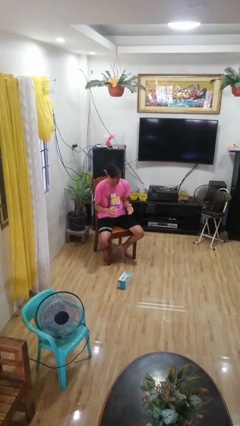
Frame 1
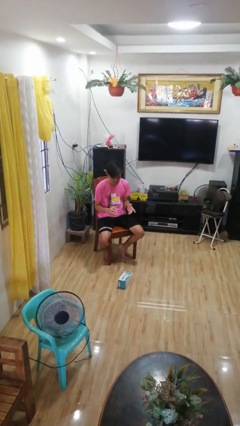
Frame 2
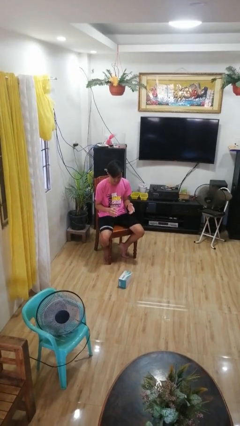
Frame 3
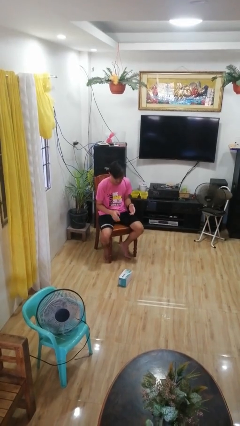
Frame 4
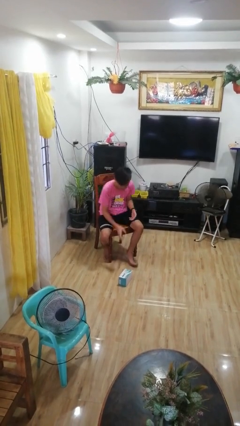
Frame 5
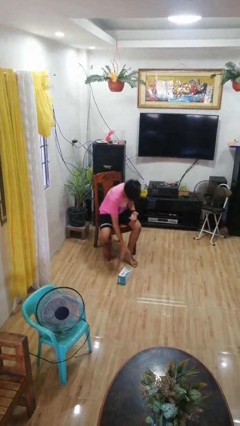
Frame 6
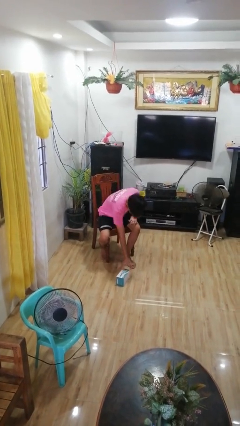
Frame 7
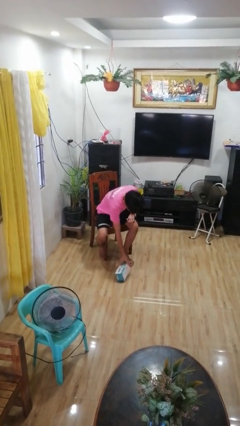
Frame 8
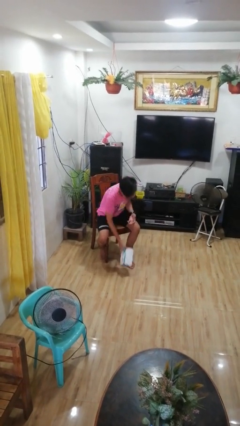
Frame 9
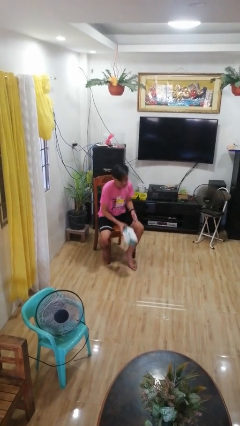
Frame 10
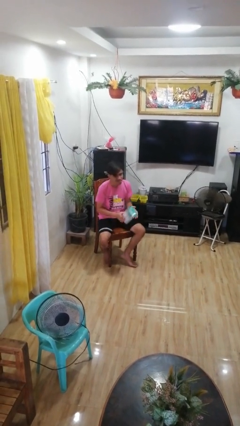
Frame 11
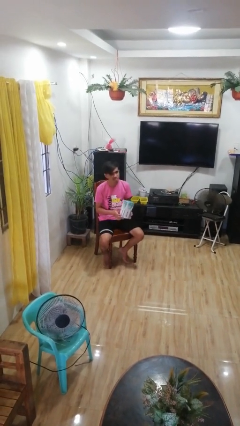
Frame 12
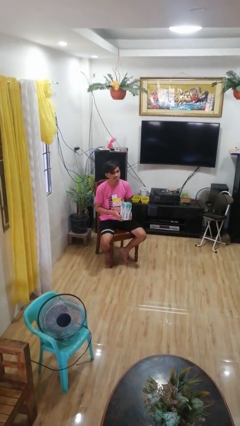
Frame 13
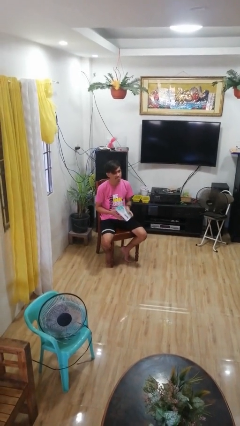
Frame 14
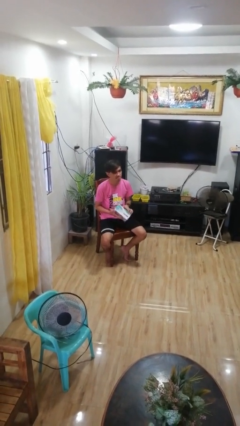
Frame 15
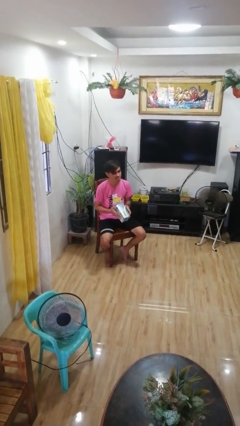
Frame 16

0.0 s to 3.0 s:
person picks up object from floor

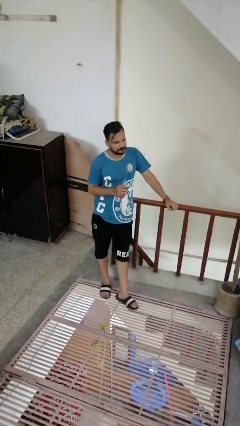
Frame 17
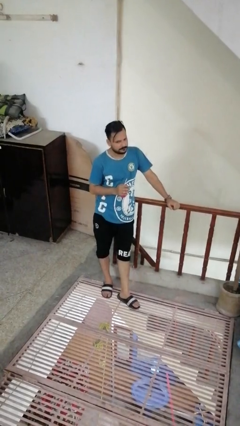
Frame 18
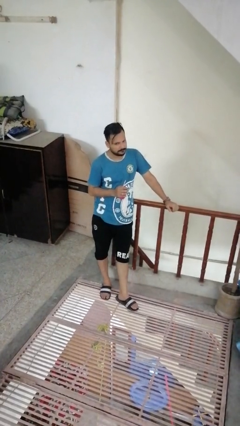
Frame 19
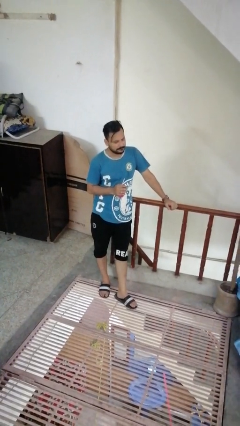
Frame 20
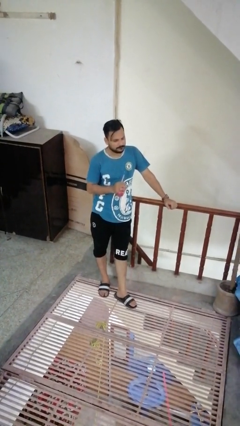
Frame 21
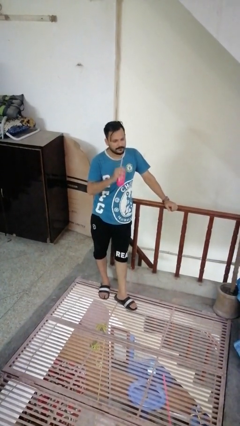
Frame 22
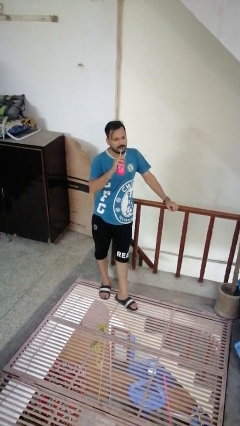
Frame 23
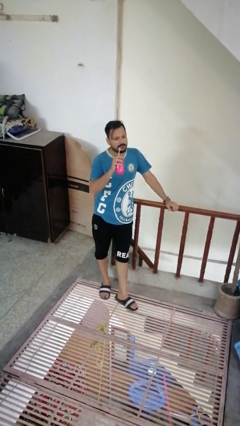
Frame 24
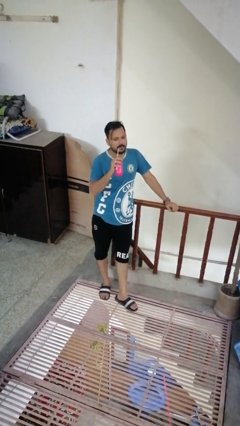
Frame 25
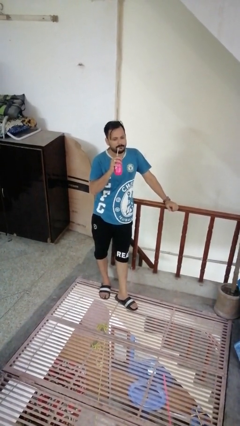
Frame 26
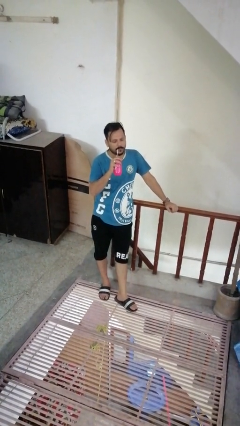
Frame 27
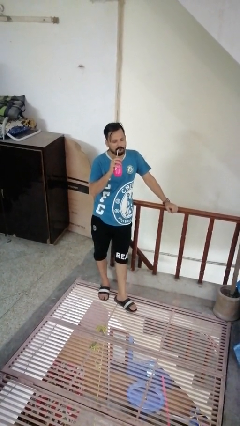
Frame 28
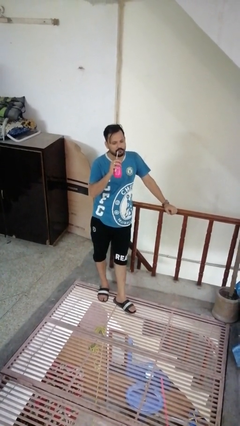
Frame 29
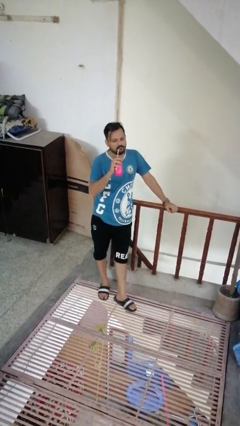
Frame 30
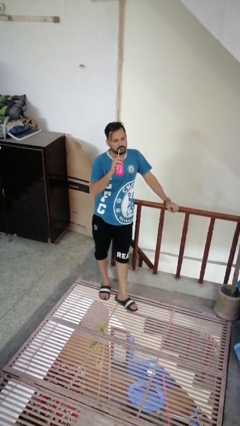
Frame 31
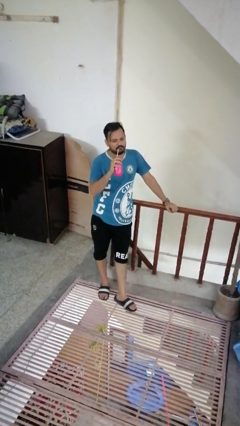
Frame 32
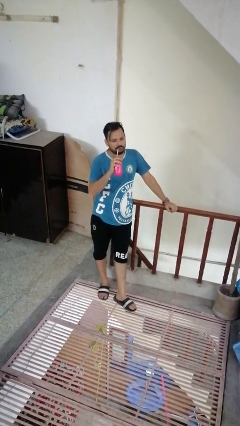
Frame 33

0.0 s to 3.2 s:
person drinks from straw

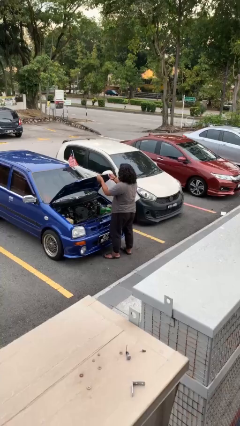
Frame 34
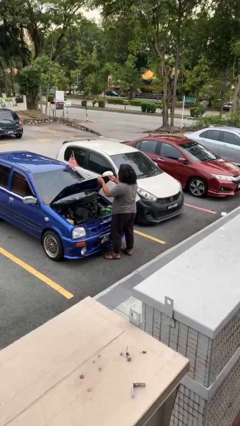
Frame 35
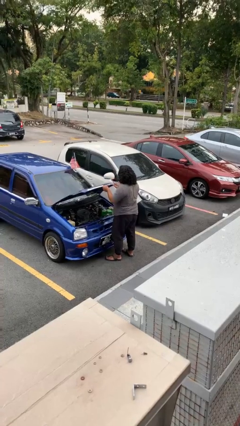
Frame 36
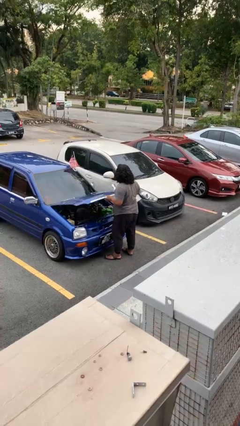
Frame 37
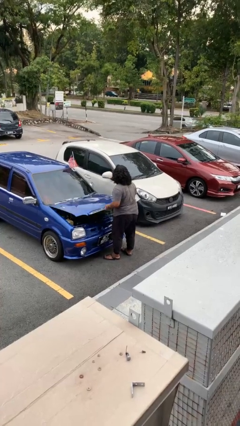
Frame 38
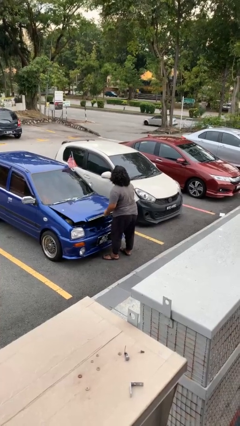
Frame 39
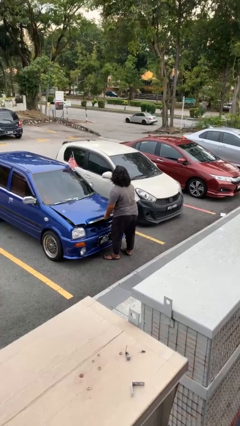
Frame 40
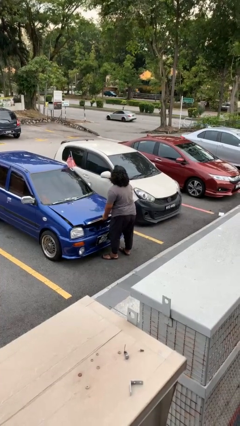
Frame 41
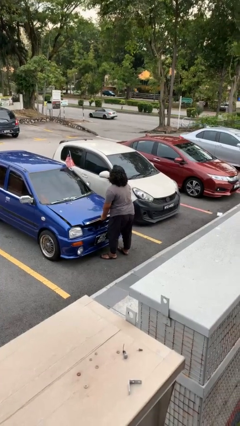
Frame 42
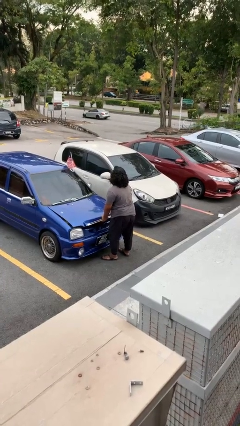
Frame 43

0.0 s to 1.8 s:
person closes car hood

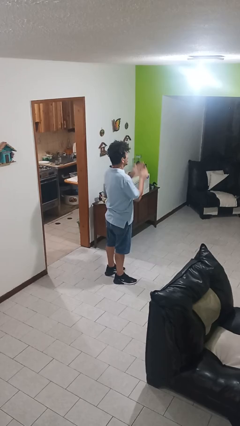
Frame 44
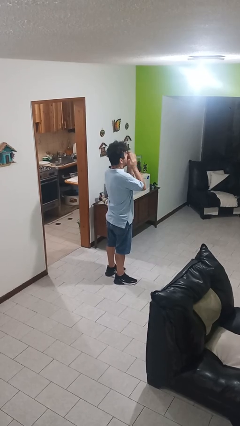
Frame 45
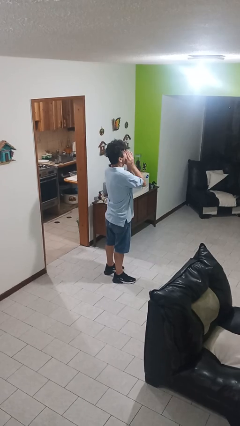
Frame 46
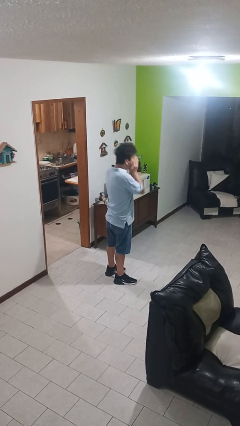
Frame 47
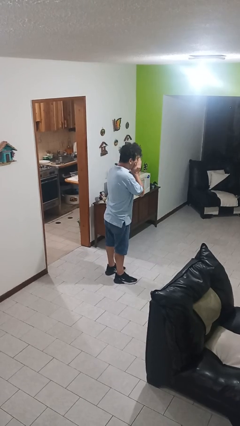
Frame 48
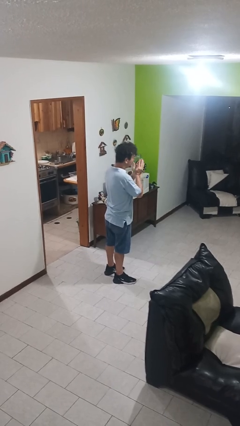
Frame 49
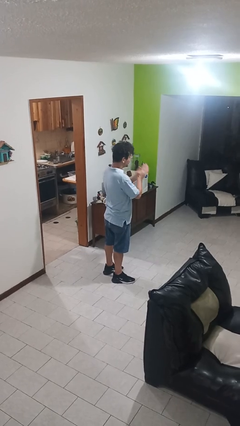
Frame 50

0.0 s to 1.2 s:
person sneezes into hand

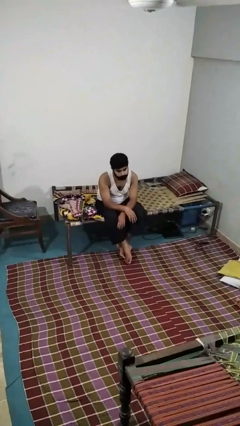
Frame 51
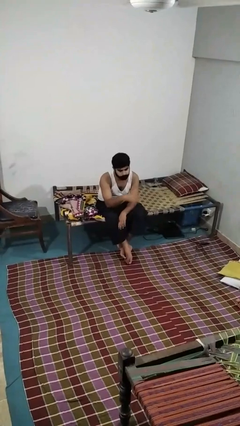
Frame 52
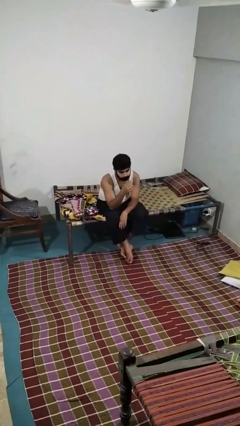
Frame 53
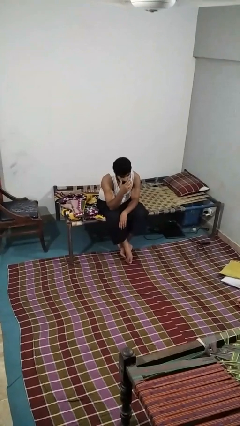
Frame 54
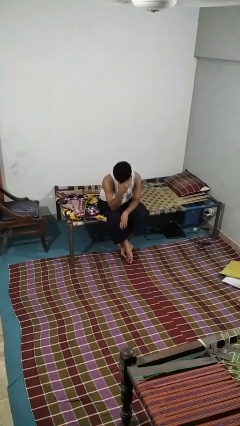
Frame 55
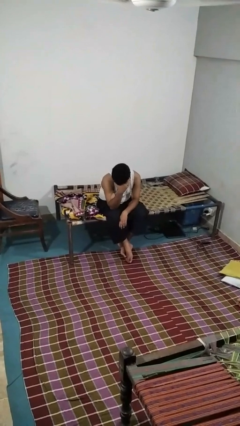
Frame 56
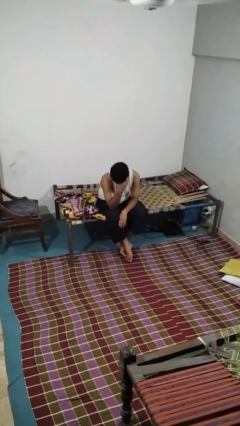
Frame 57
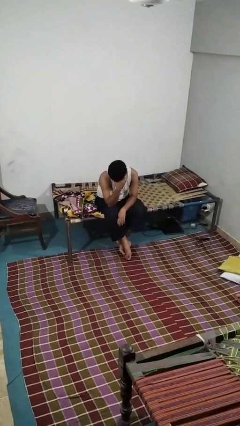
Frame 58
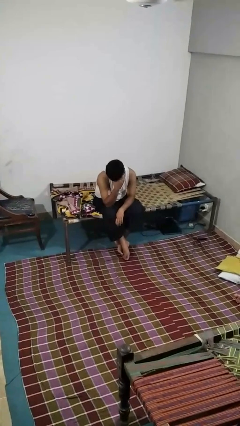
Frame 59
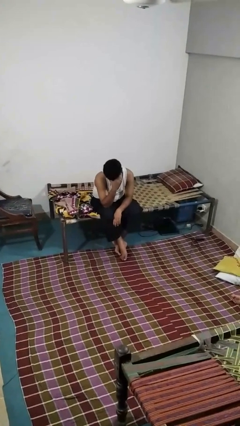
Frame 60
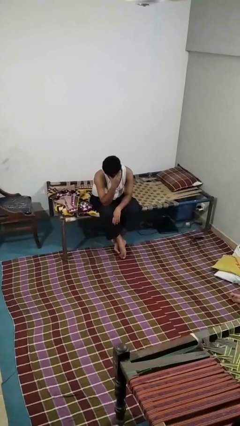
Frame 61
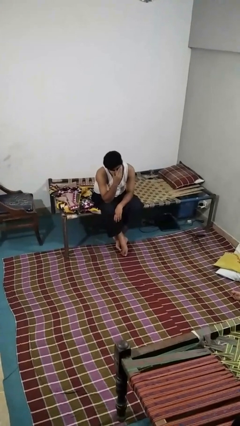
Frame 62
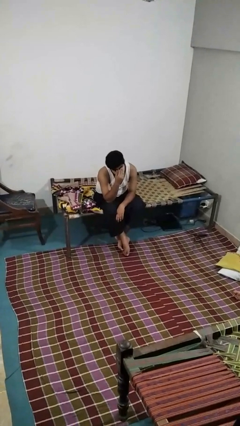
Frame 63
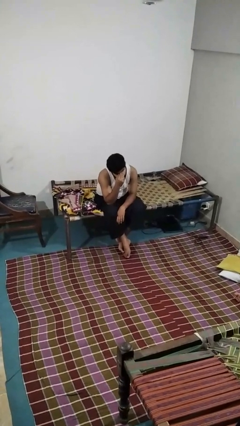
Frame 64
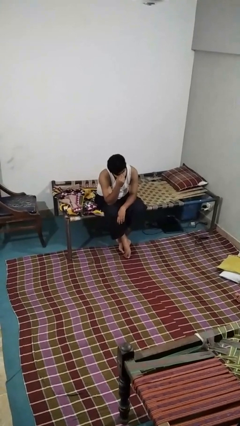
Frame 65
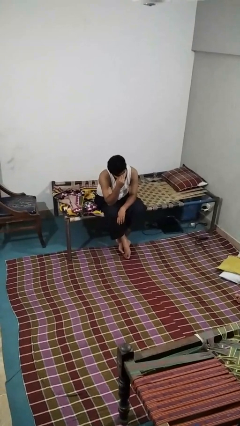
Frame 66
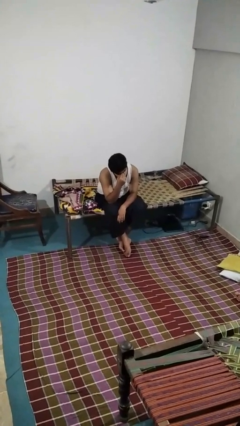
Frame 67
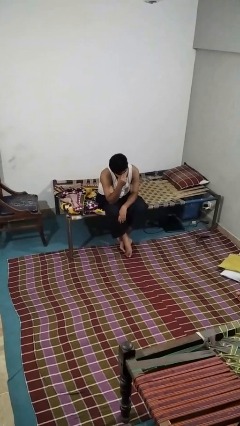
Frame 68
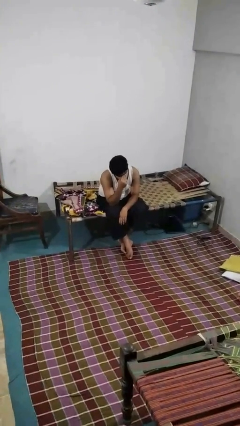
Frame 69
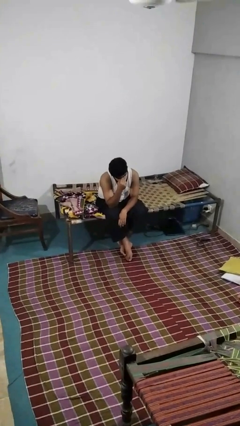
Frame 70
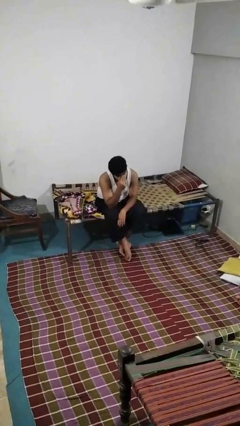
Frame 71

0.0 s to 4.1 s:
person covers face with hands

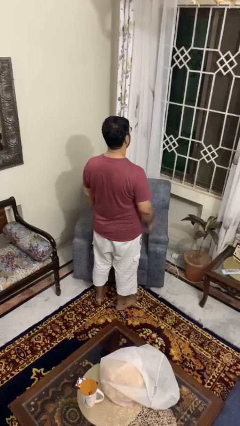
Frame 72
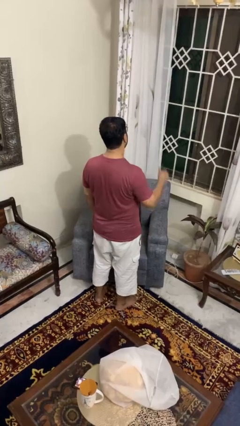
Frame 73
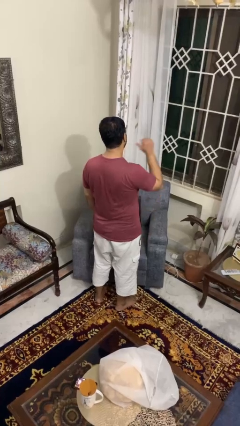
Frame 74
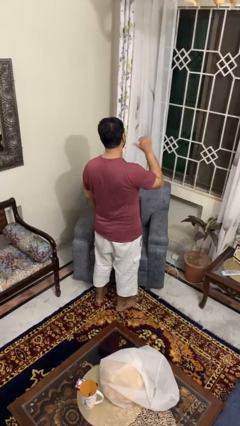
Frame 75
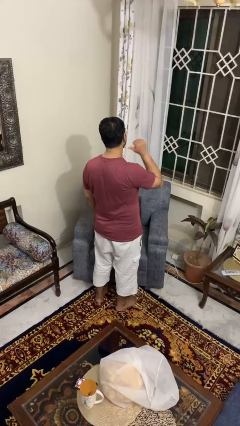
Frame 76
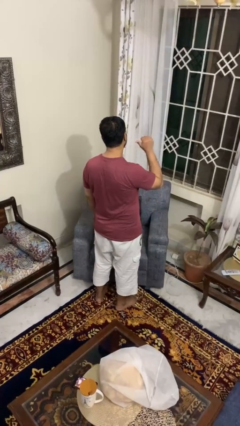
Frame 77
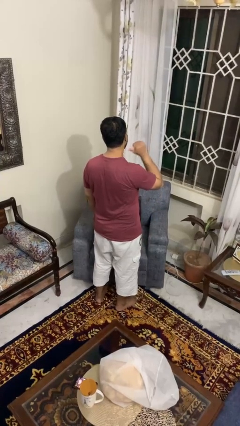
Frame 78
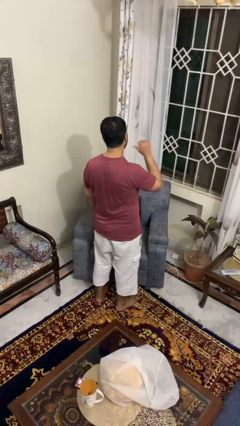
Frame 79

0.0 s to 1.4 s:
person gestures behind me

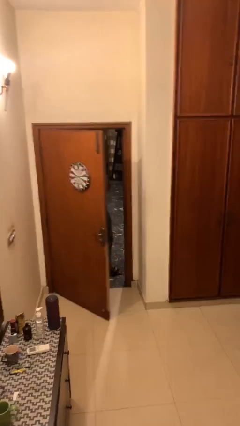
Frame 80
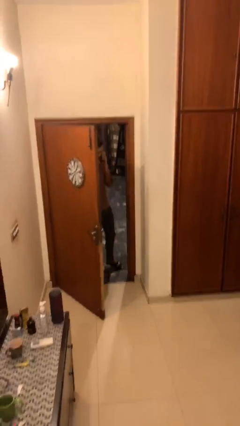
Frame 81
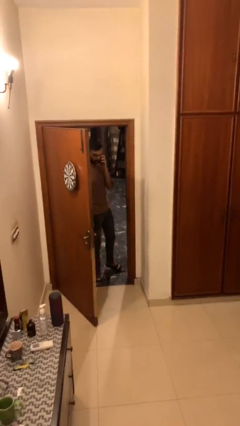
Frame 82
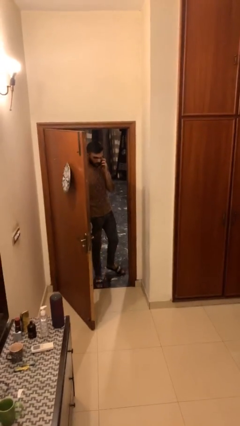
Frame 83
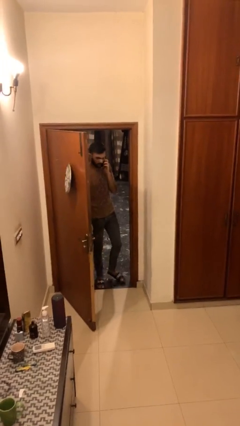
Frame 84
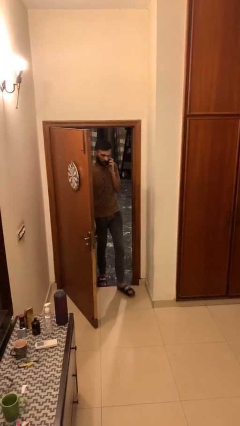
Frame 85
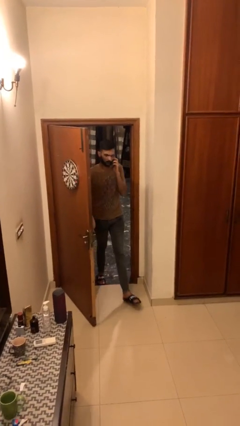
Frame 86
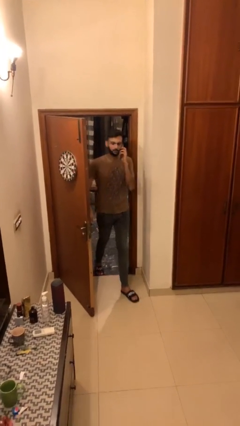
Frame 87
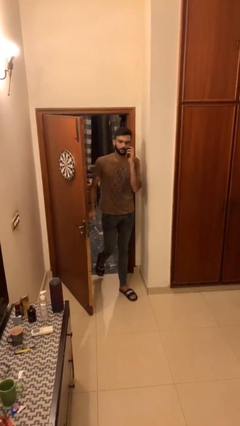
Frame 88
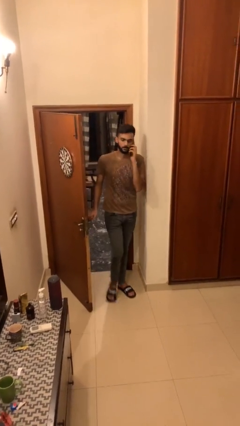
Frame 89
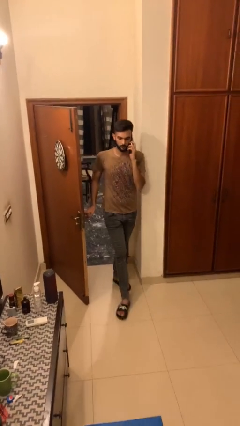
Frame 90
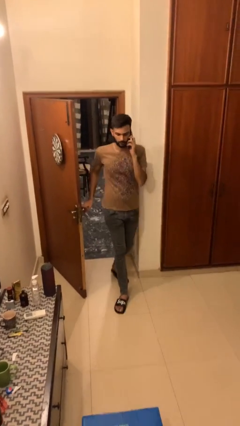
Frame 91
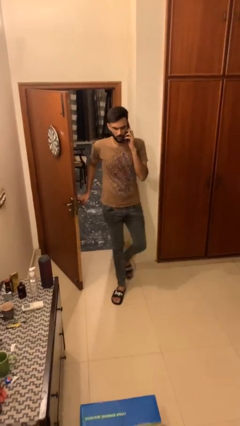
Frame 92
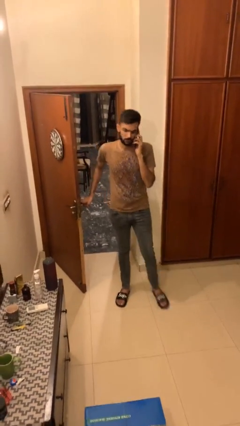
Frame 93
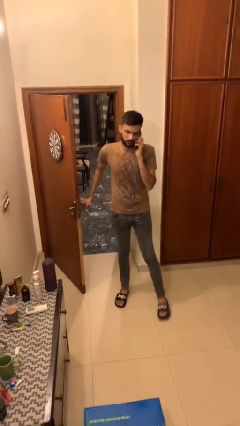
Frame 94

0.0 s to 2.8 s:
person enters scene through structure
